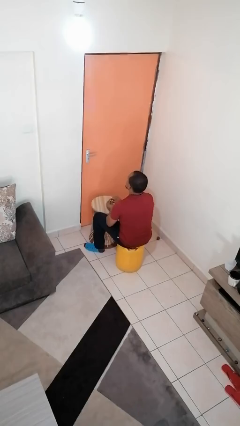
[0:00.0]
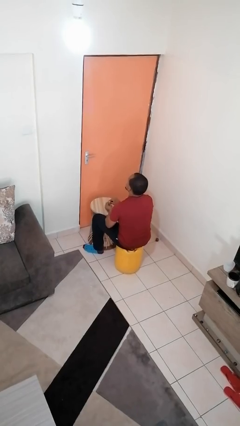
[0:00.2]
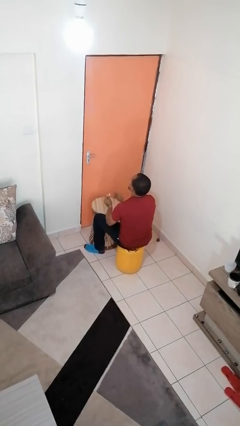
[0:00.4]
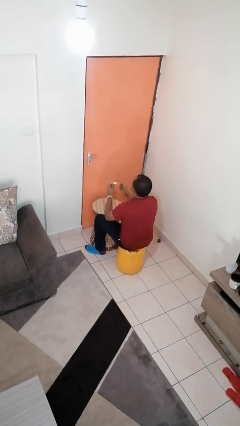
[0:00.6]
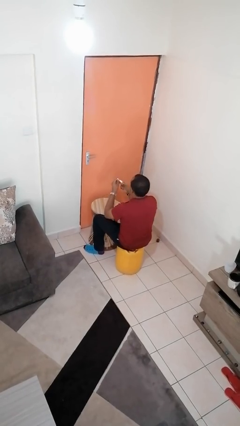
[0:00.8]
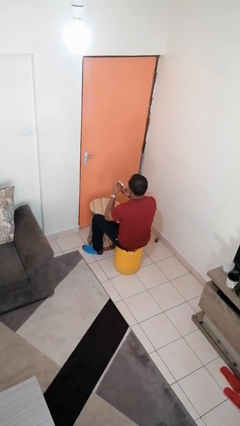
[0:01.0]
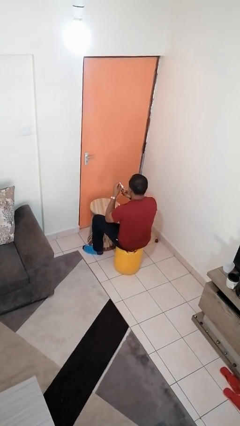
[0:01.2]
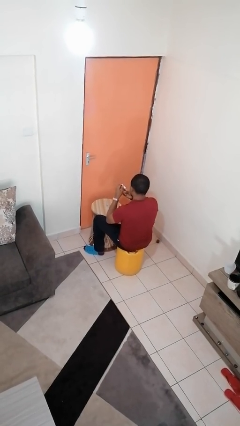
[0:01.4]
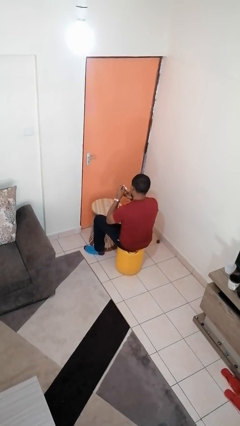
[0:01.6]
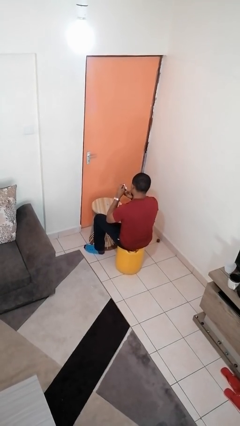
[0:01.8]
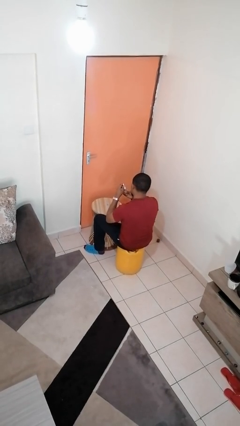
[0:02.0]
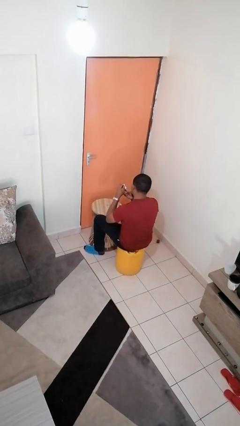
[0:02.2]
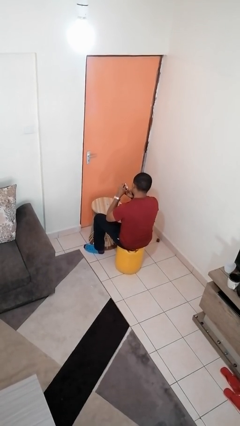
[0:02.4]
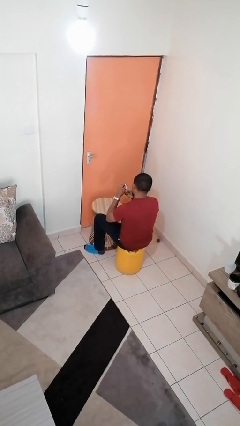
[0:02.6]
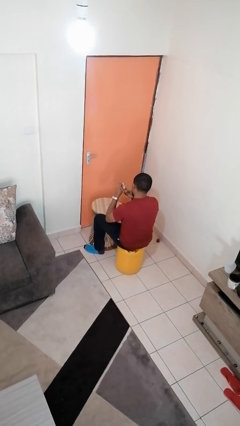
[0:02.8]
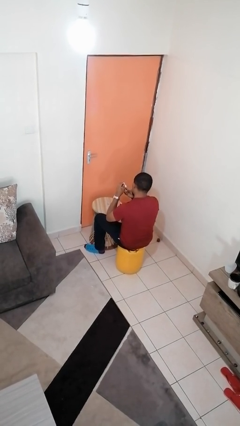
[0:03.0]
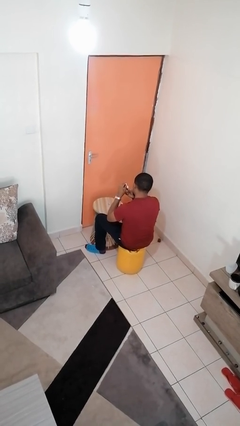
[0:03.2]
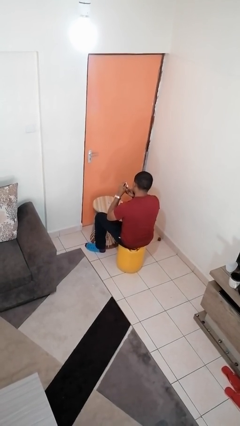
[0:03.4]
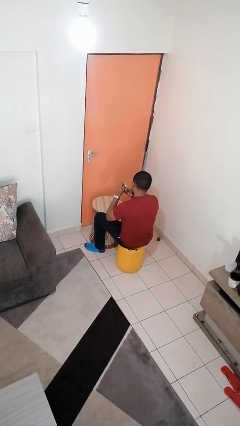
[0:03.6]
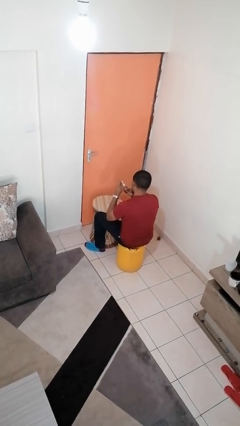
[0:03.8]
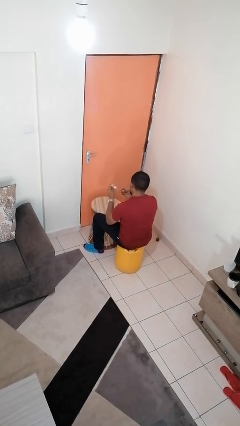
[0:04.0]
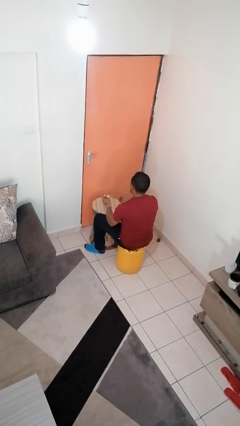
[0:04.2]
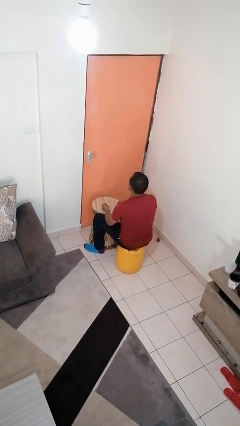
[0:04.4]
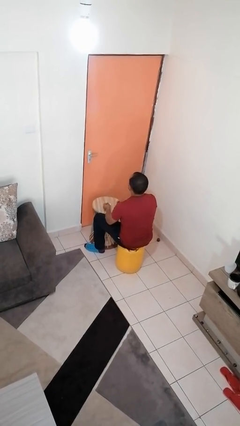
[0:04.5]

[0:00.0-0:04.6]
person paints fingernails

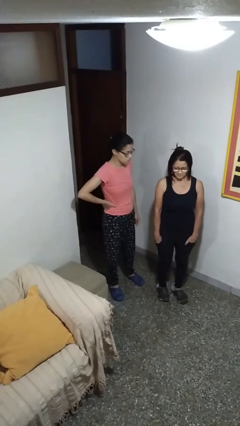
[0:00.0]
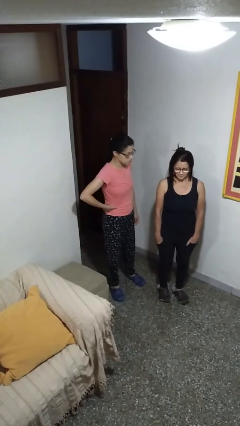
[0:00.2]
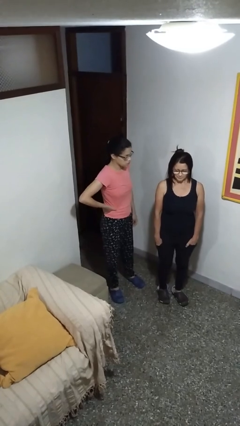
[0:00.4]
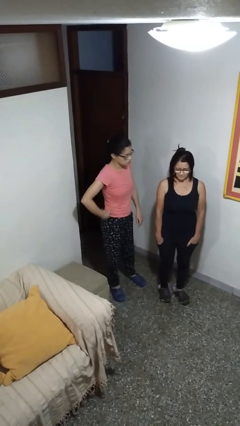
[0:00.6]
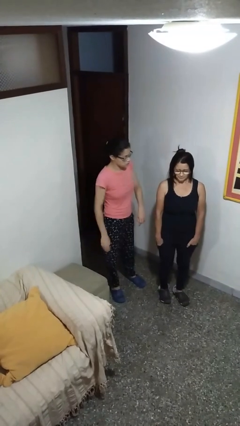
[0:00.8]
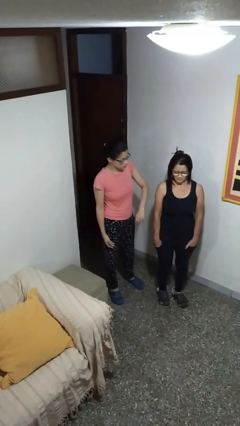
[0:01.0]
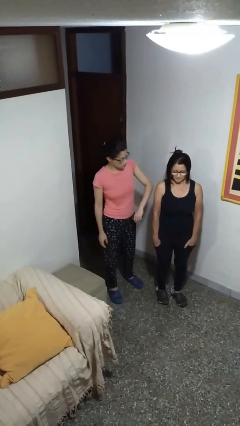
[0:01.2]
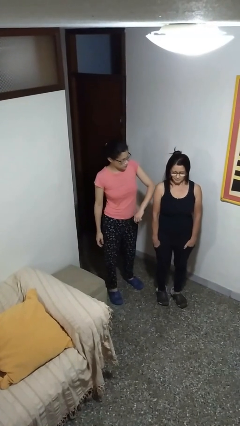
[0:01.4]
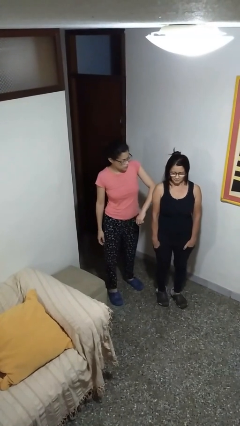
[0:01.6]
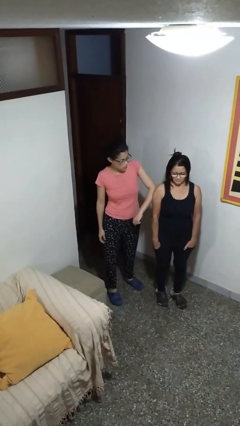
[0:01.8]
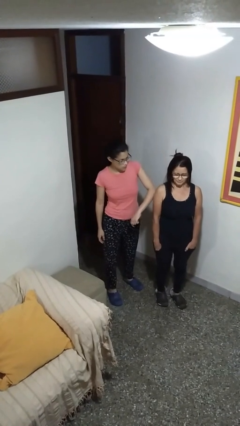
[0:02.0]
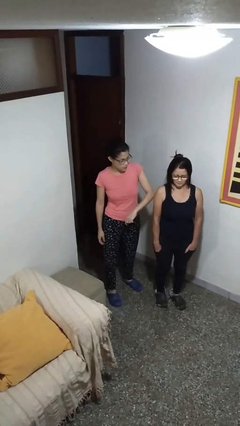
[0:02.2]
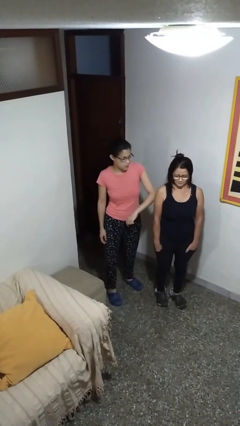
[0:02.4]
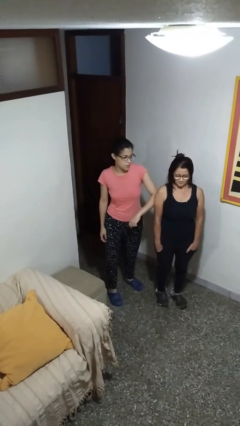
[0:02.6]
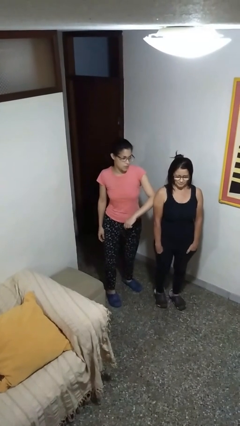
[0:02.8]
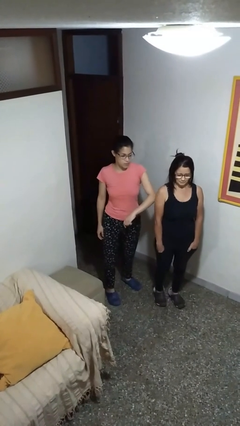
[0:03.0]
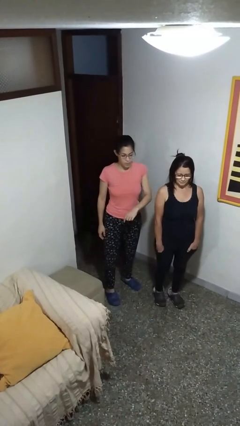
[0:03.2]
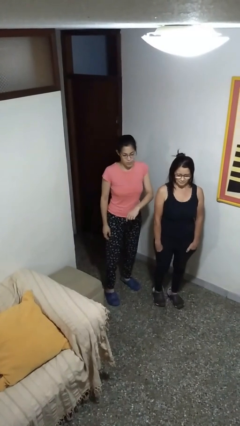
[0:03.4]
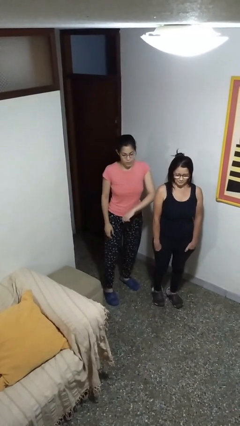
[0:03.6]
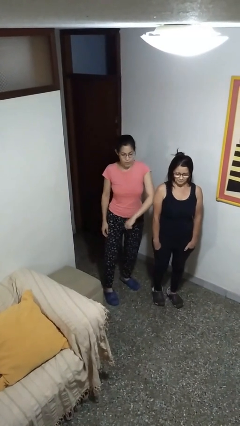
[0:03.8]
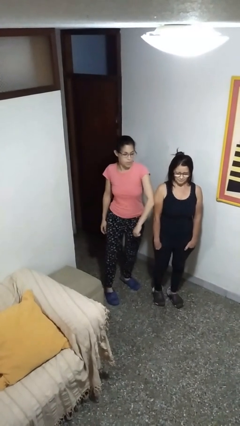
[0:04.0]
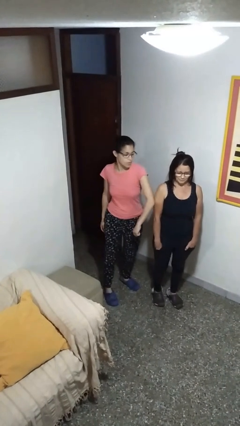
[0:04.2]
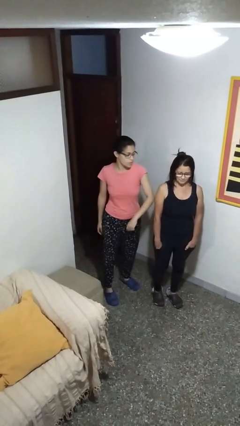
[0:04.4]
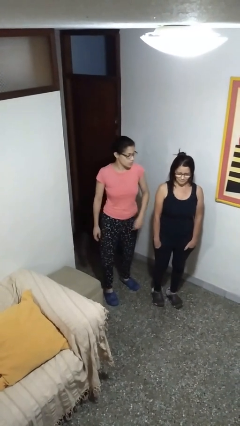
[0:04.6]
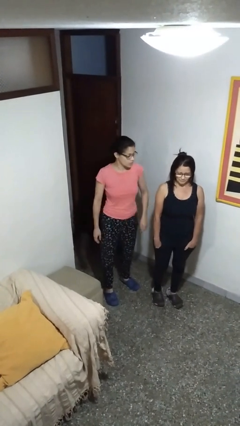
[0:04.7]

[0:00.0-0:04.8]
person nudges person with elbow

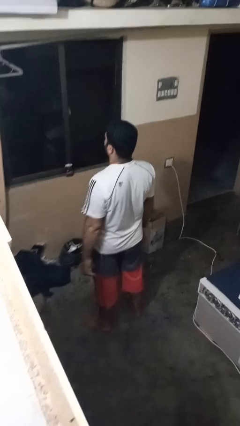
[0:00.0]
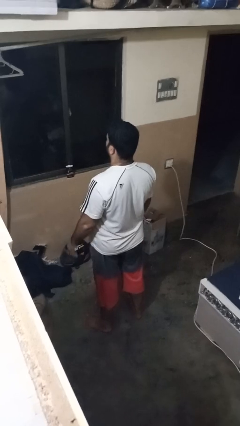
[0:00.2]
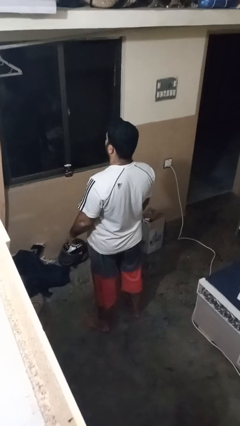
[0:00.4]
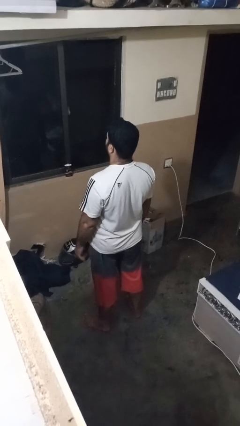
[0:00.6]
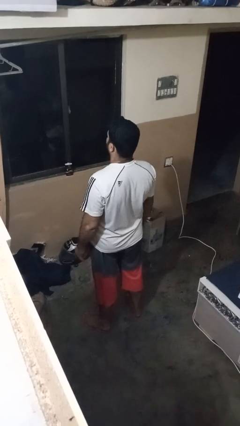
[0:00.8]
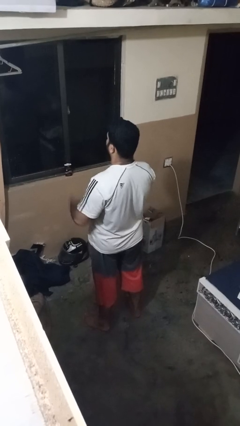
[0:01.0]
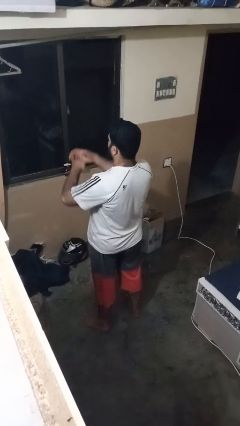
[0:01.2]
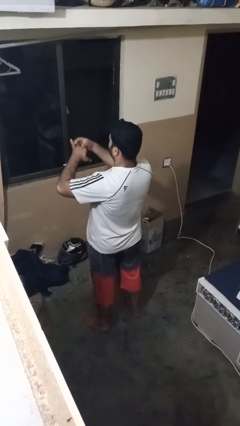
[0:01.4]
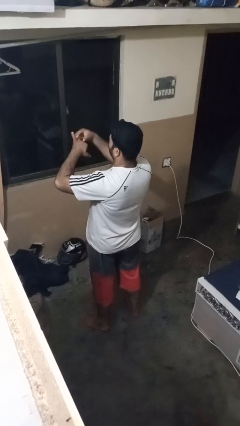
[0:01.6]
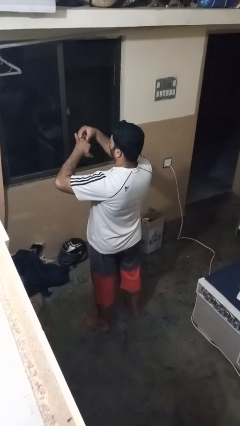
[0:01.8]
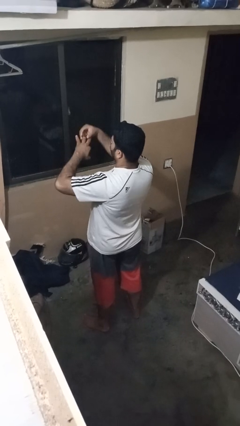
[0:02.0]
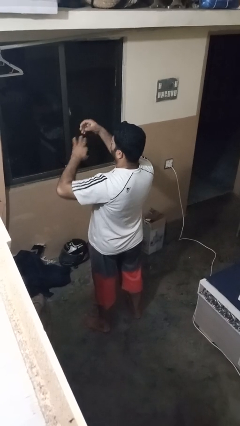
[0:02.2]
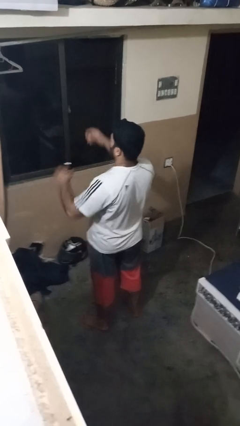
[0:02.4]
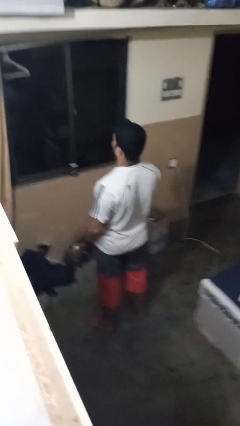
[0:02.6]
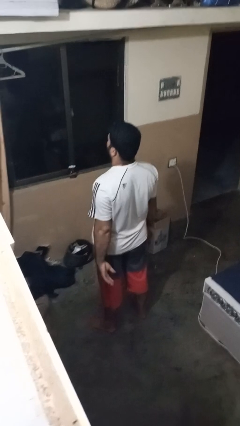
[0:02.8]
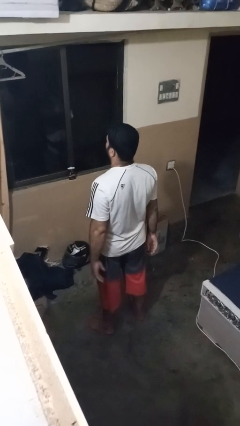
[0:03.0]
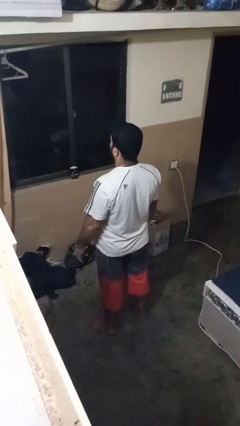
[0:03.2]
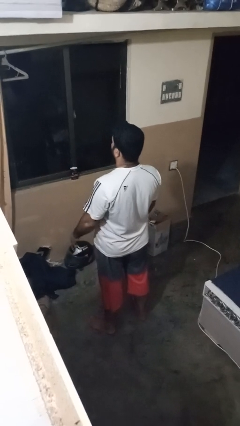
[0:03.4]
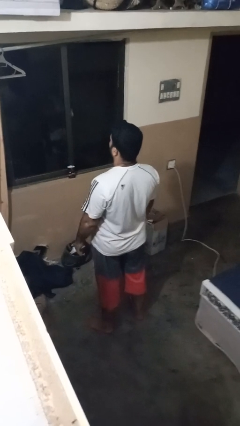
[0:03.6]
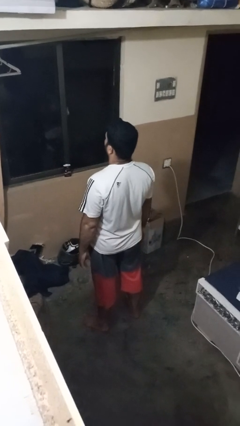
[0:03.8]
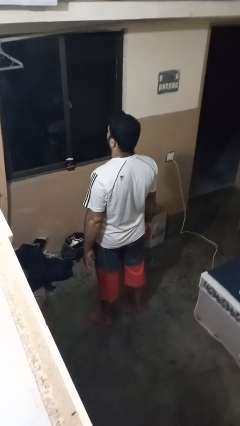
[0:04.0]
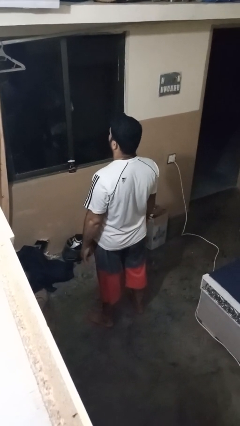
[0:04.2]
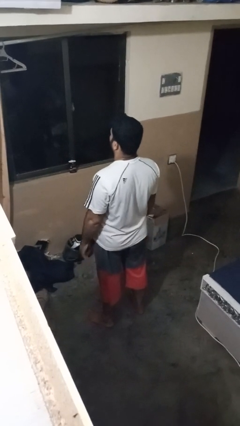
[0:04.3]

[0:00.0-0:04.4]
person takes off ring

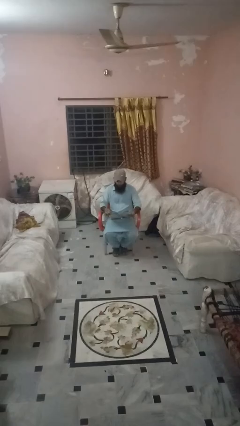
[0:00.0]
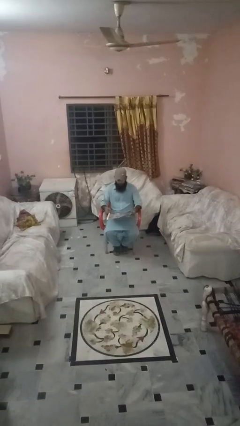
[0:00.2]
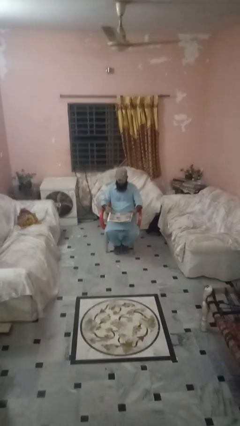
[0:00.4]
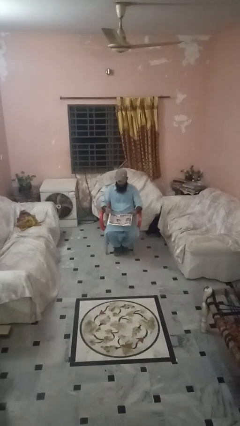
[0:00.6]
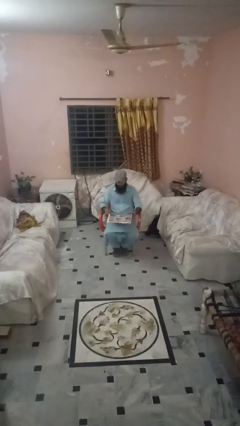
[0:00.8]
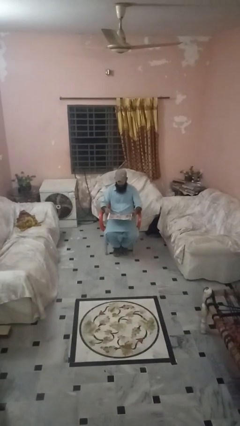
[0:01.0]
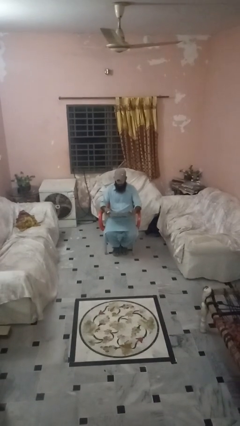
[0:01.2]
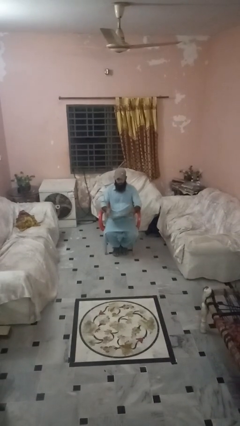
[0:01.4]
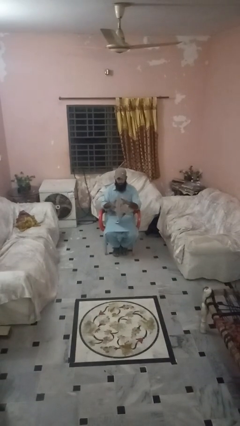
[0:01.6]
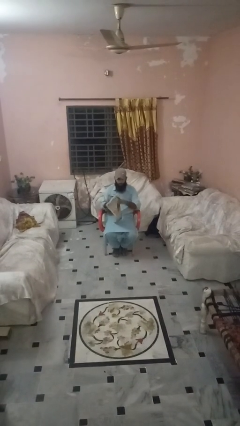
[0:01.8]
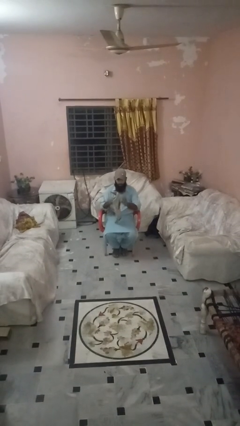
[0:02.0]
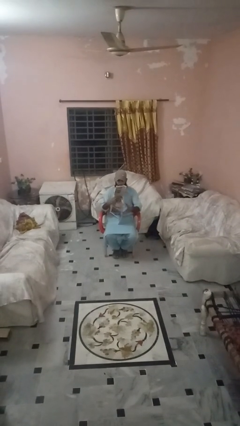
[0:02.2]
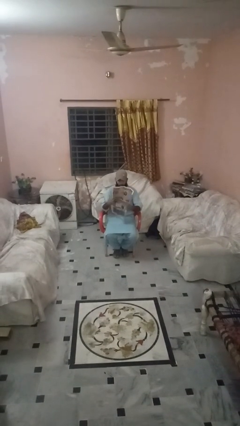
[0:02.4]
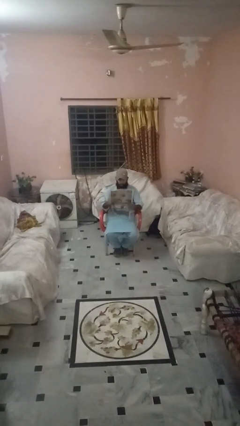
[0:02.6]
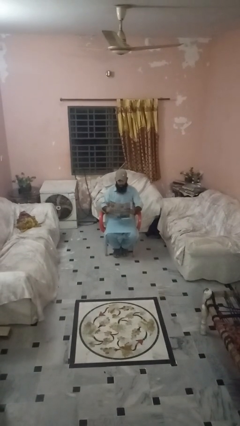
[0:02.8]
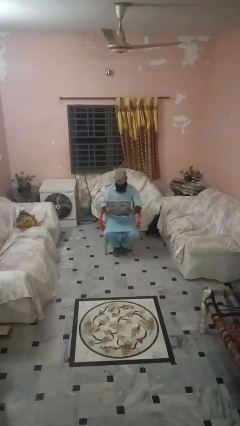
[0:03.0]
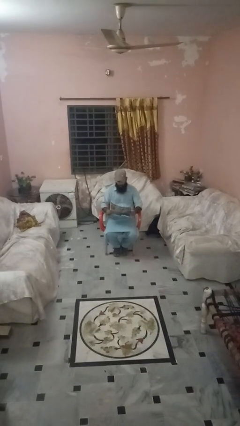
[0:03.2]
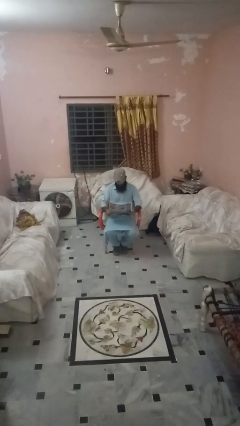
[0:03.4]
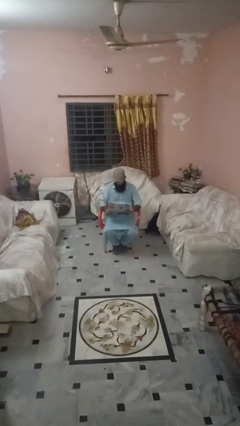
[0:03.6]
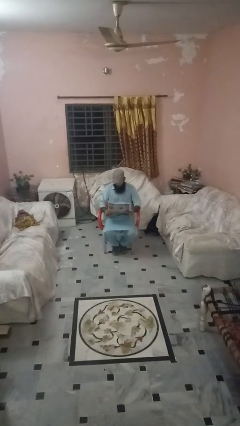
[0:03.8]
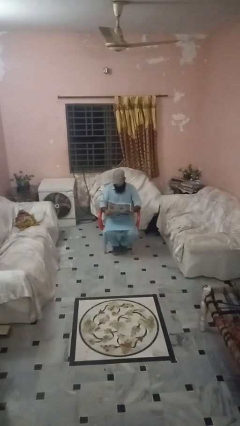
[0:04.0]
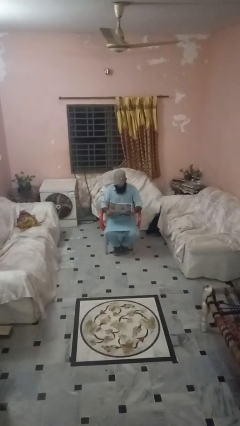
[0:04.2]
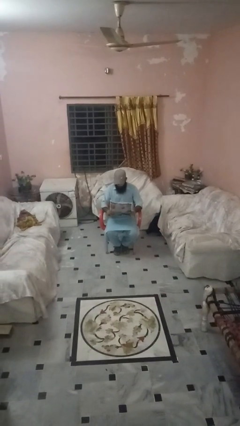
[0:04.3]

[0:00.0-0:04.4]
person reads newspaper
